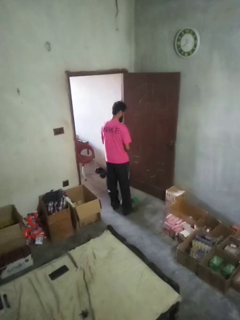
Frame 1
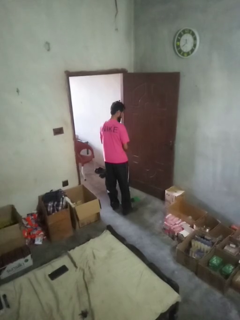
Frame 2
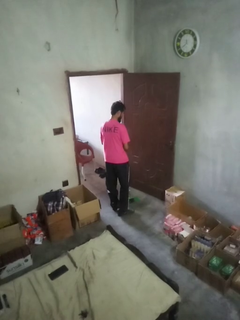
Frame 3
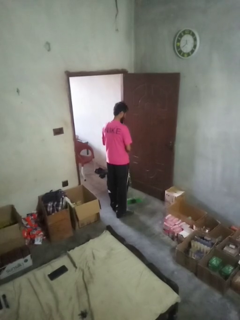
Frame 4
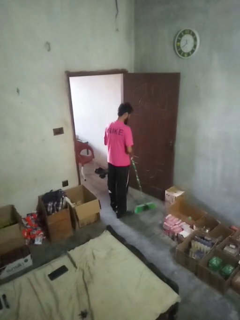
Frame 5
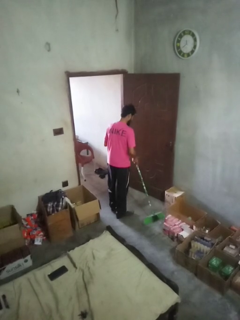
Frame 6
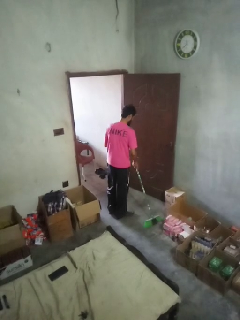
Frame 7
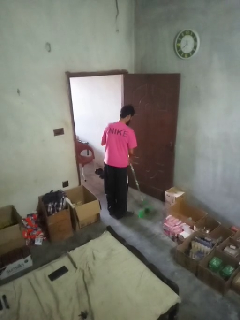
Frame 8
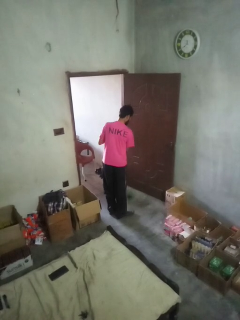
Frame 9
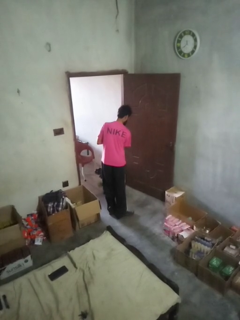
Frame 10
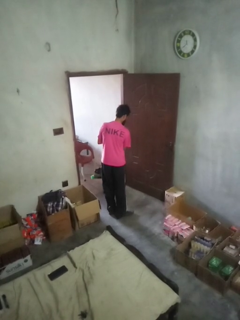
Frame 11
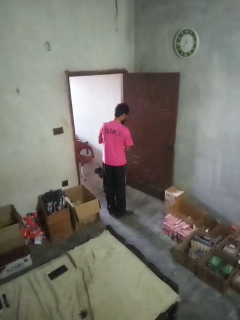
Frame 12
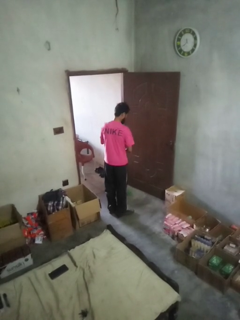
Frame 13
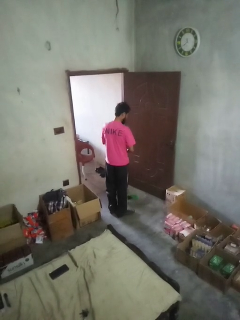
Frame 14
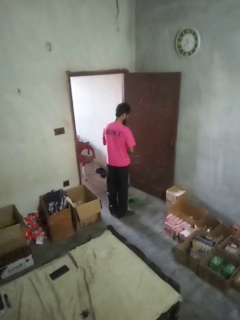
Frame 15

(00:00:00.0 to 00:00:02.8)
person sweeps floor

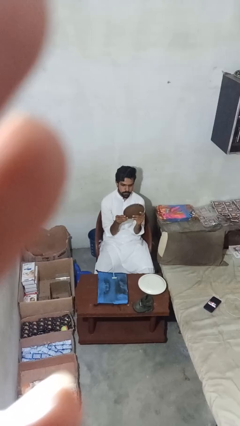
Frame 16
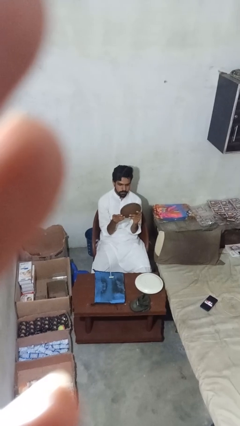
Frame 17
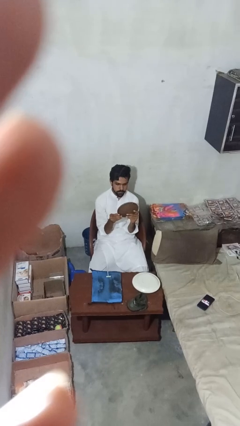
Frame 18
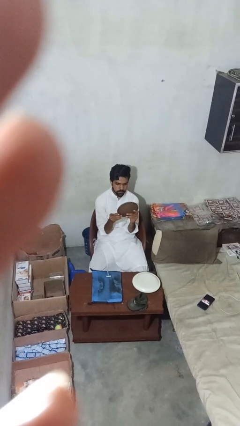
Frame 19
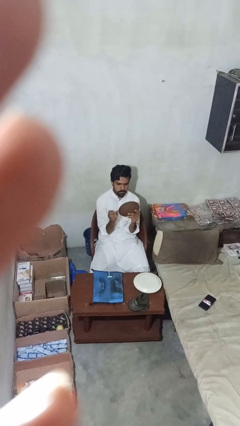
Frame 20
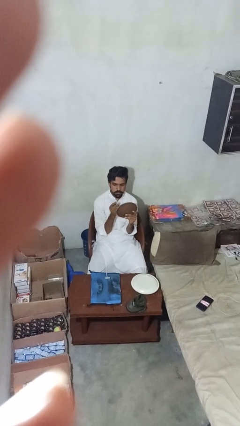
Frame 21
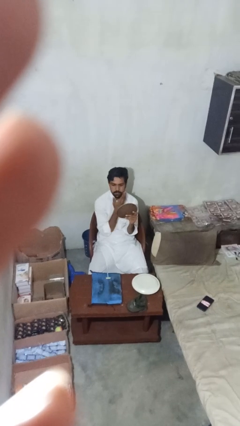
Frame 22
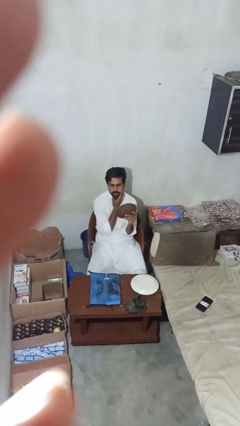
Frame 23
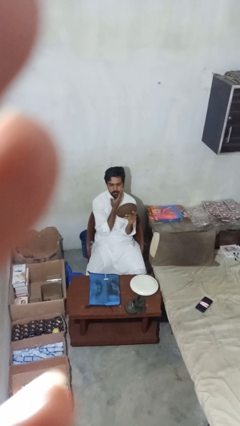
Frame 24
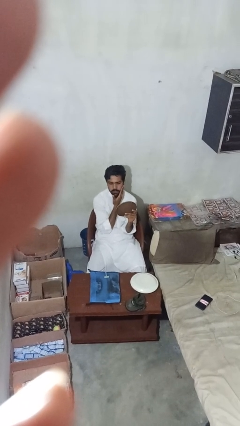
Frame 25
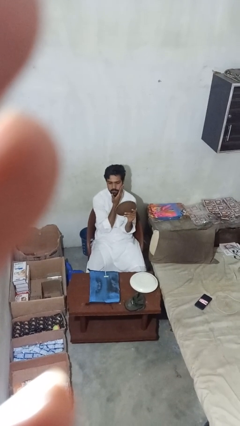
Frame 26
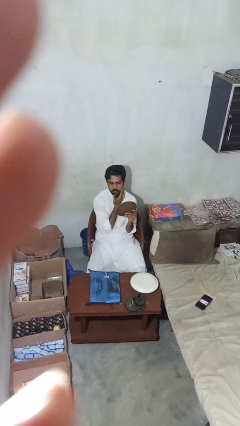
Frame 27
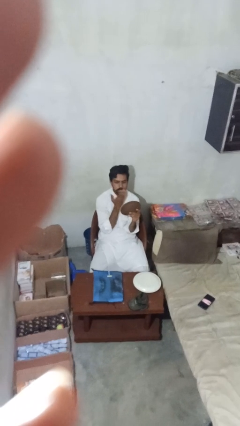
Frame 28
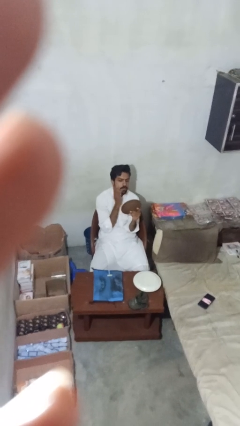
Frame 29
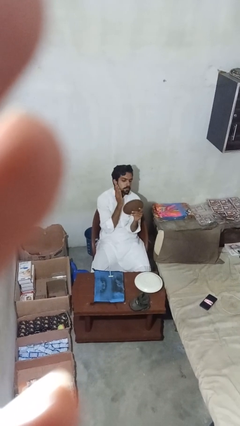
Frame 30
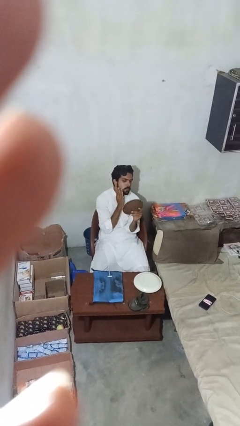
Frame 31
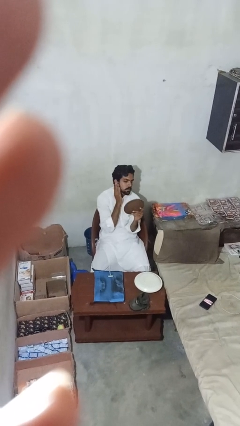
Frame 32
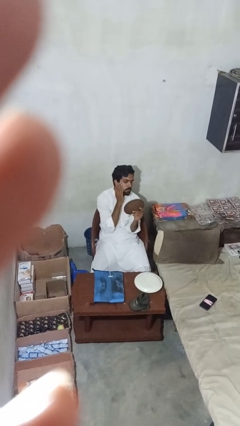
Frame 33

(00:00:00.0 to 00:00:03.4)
person applies shaving cream

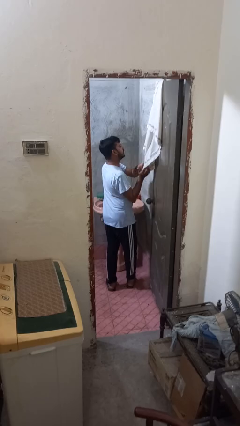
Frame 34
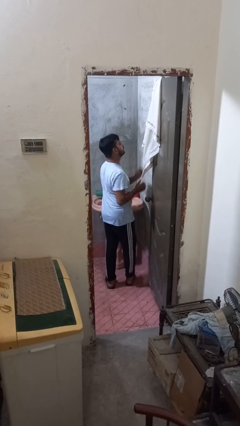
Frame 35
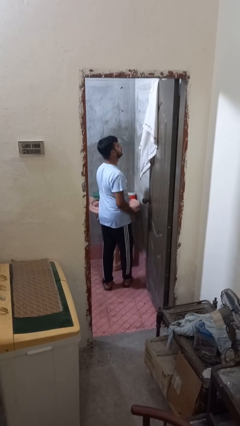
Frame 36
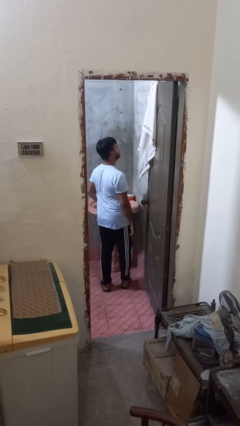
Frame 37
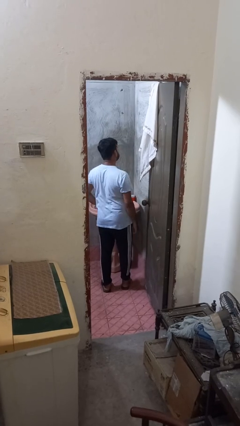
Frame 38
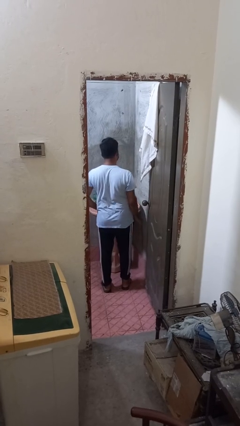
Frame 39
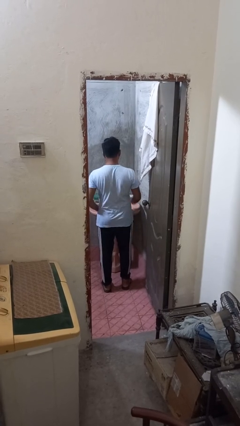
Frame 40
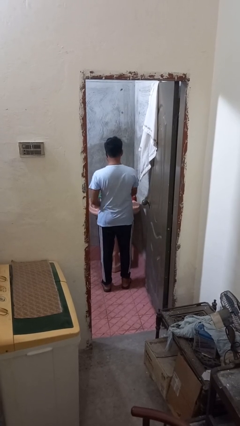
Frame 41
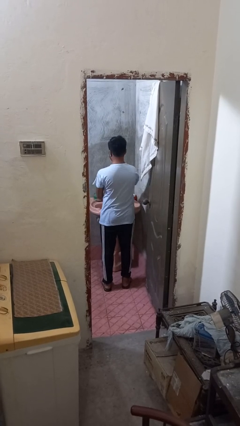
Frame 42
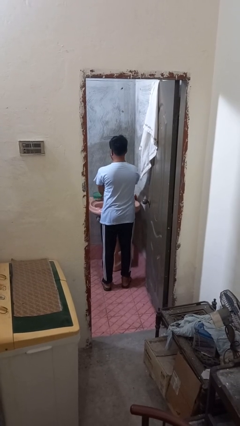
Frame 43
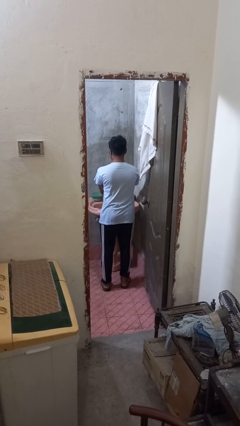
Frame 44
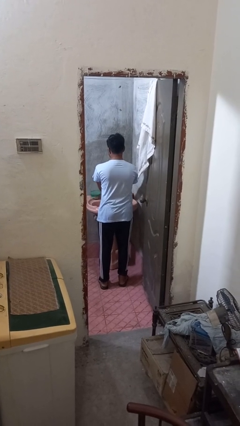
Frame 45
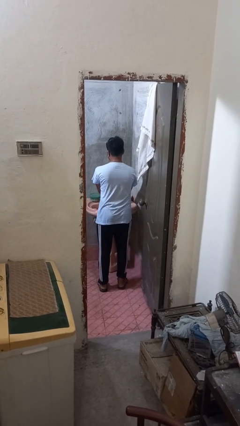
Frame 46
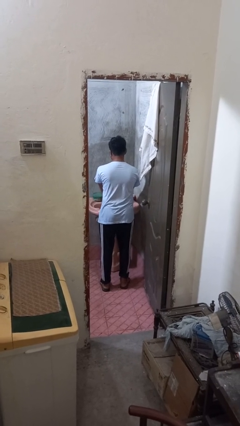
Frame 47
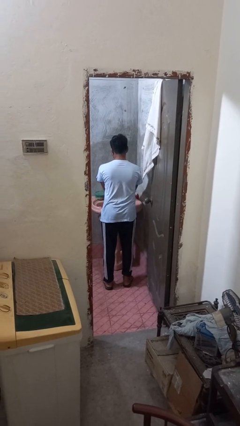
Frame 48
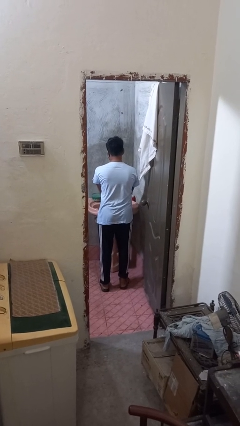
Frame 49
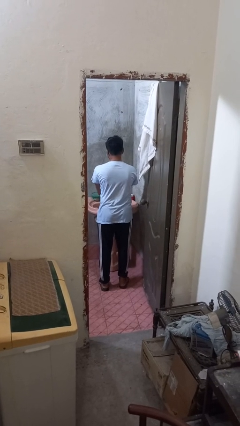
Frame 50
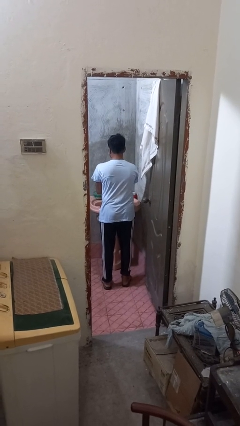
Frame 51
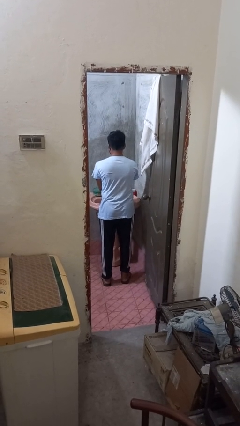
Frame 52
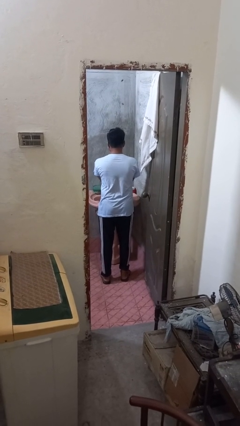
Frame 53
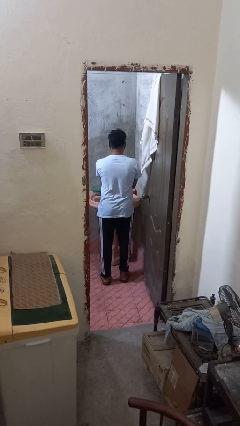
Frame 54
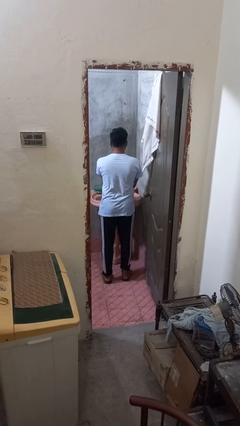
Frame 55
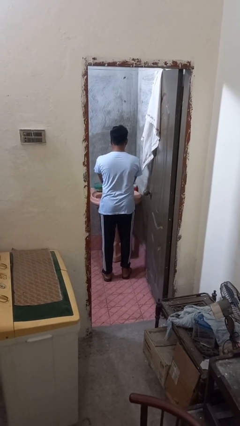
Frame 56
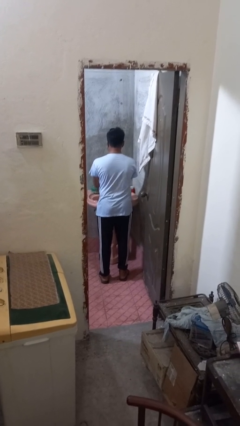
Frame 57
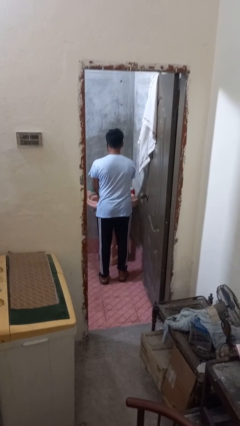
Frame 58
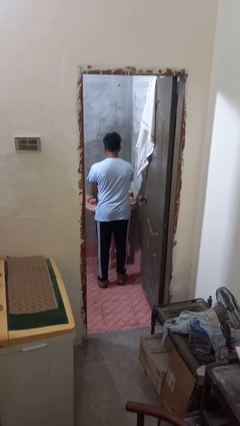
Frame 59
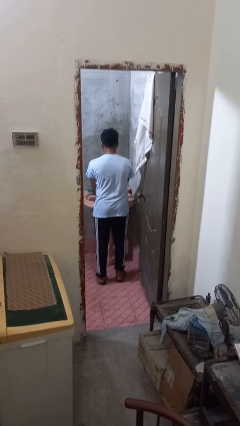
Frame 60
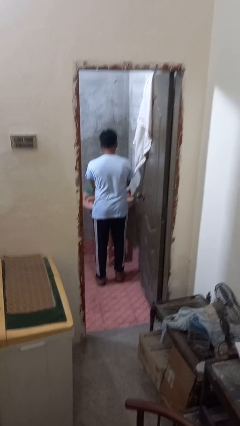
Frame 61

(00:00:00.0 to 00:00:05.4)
person washes hands

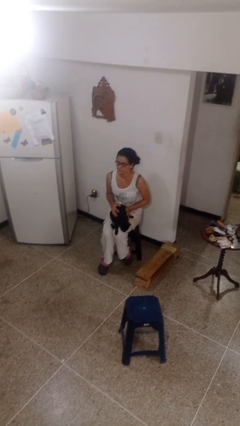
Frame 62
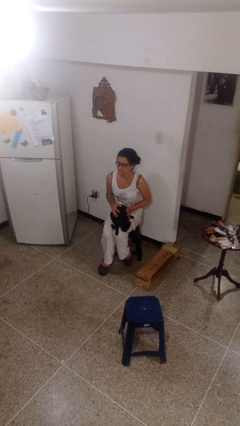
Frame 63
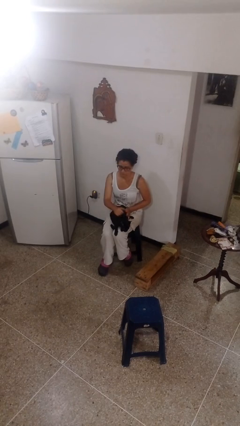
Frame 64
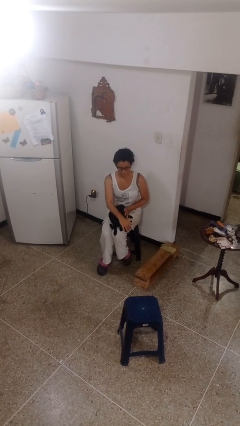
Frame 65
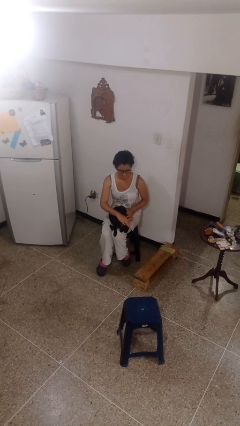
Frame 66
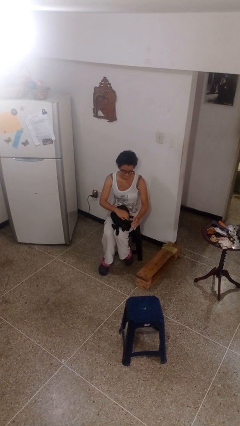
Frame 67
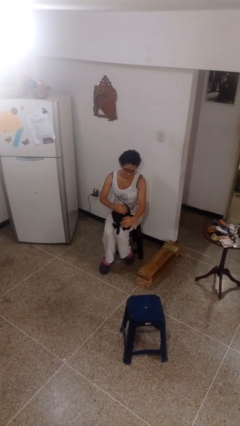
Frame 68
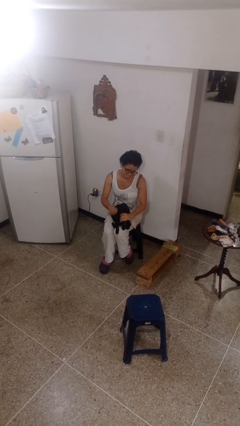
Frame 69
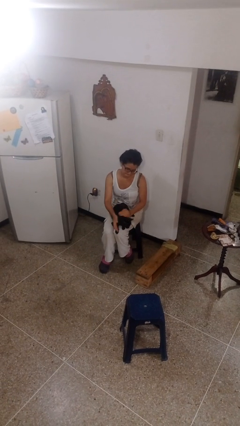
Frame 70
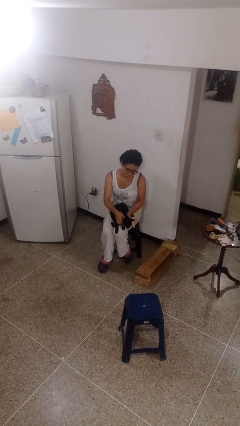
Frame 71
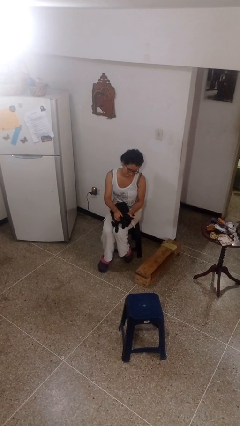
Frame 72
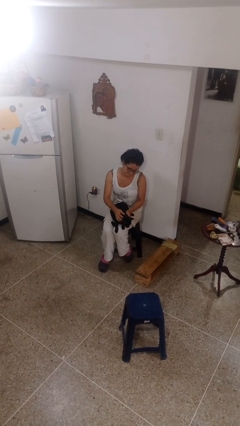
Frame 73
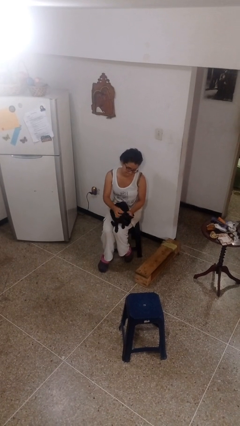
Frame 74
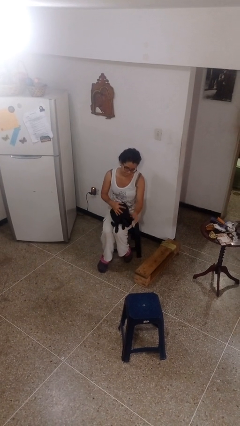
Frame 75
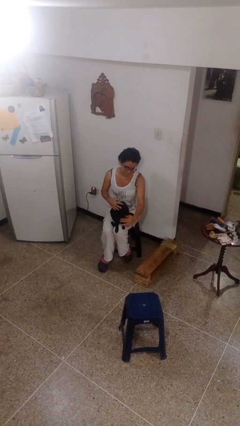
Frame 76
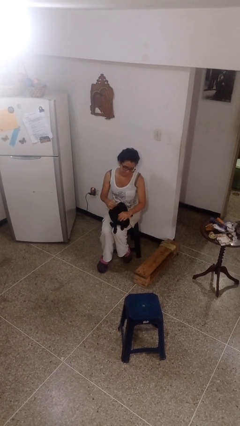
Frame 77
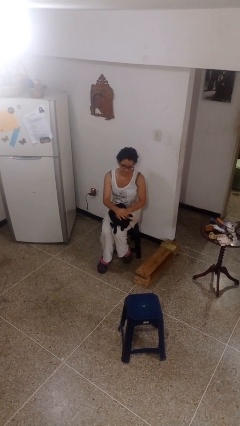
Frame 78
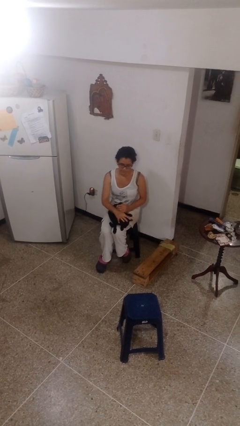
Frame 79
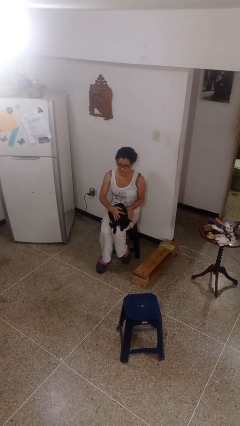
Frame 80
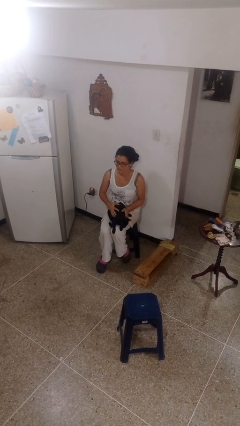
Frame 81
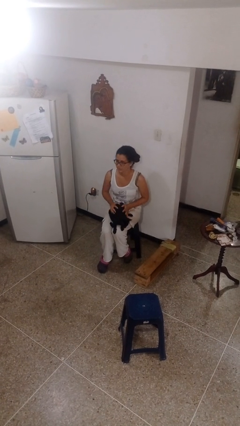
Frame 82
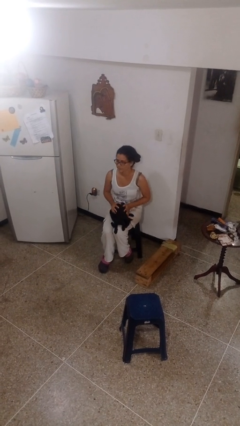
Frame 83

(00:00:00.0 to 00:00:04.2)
person pets cat

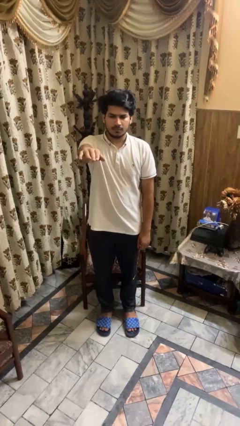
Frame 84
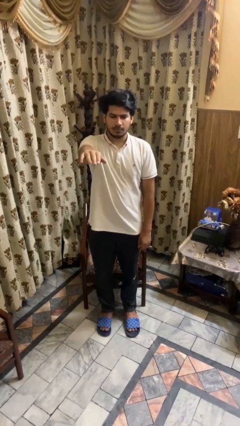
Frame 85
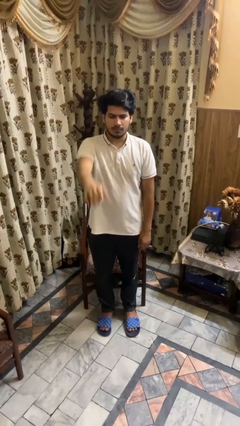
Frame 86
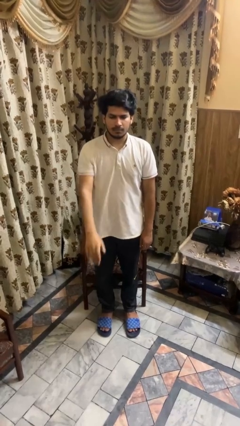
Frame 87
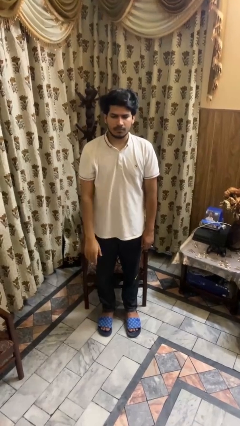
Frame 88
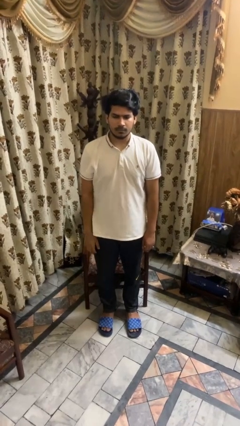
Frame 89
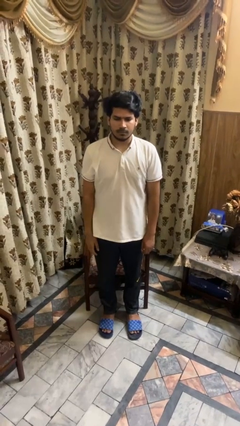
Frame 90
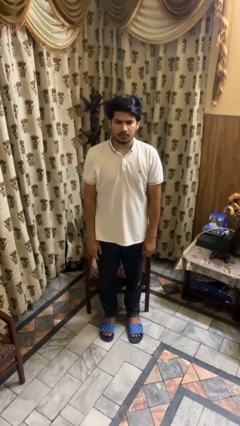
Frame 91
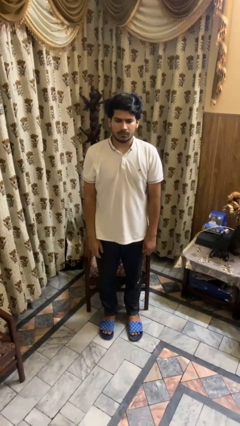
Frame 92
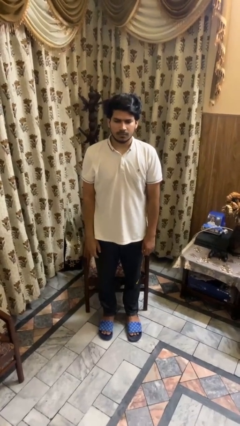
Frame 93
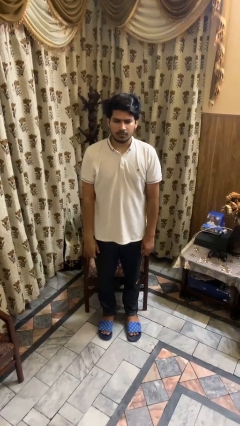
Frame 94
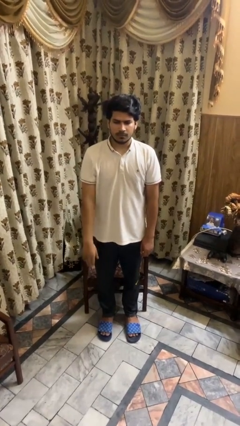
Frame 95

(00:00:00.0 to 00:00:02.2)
person gestures swipe down
